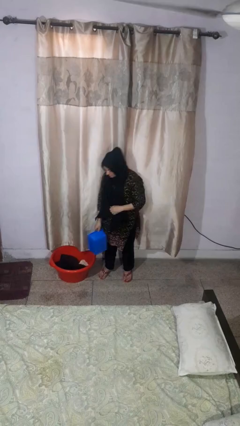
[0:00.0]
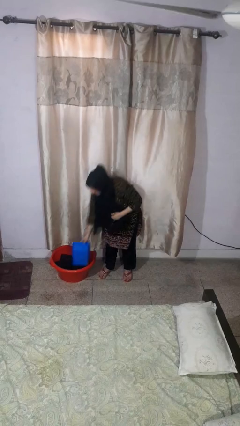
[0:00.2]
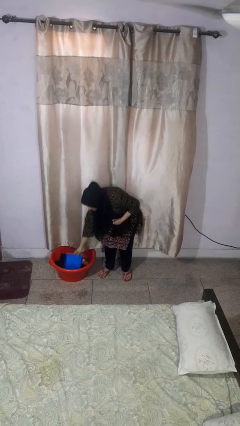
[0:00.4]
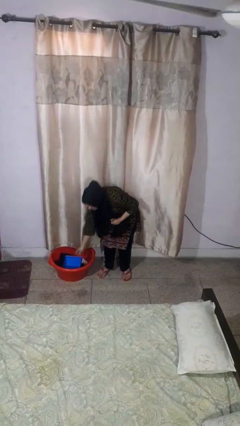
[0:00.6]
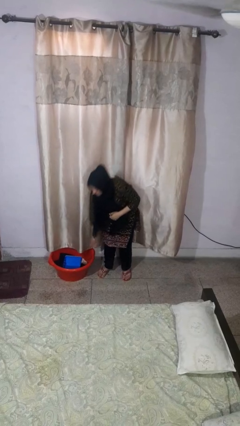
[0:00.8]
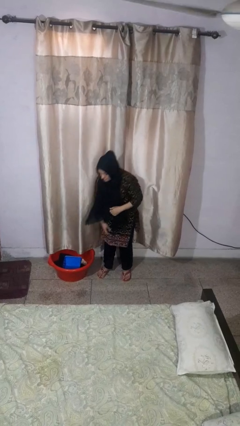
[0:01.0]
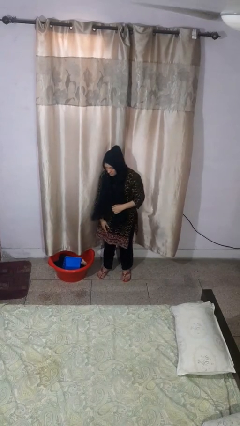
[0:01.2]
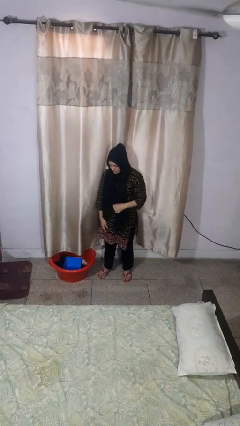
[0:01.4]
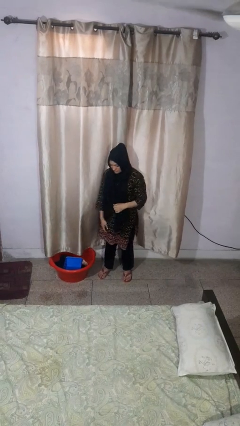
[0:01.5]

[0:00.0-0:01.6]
person puts object into basket

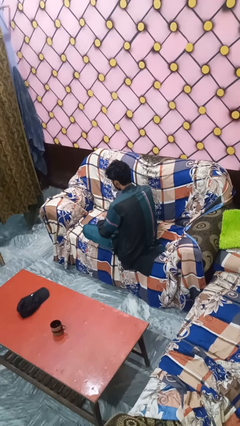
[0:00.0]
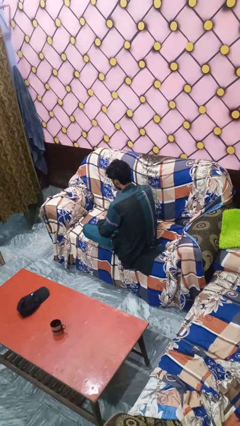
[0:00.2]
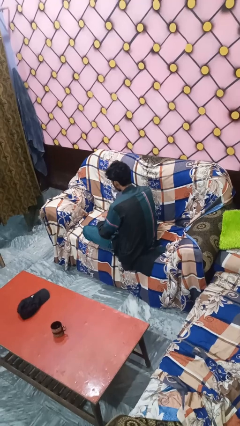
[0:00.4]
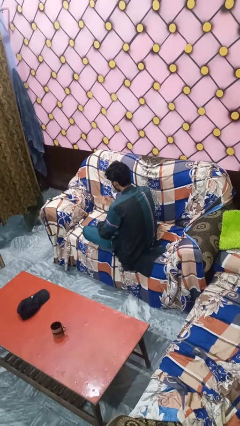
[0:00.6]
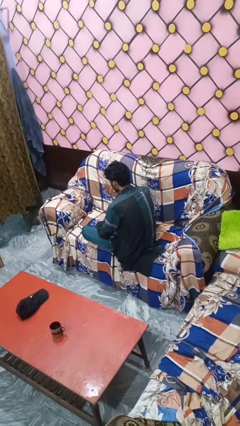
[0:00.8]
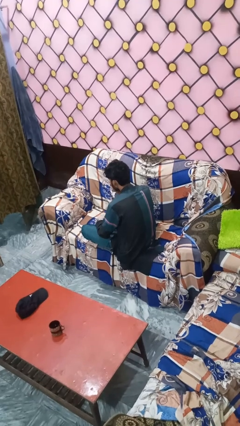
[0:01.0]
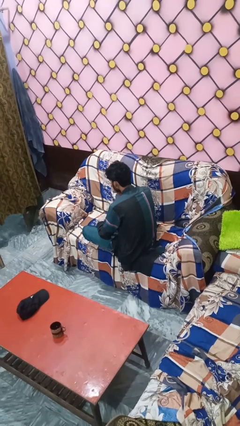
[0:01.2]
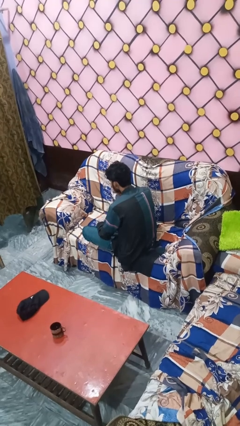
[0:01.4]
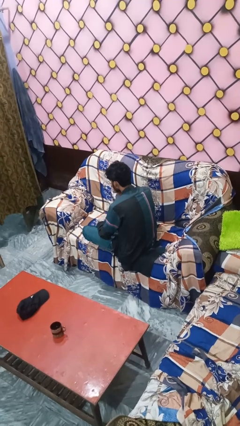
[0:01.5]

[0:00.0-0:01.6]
person gestures blow kiss

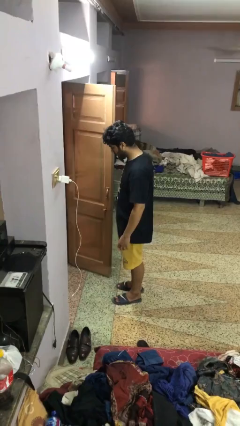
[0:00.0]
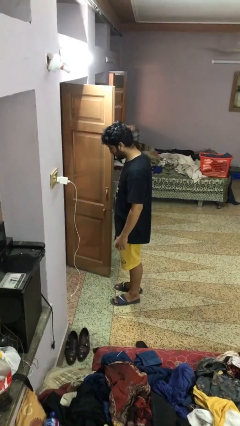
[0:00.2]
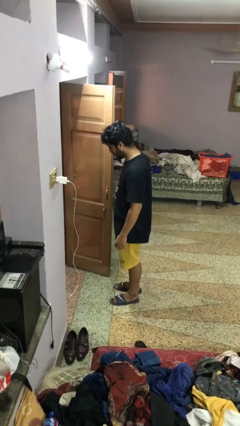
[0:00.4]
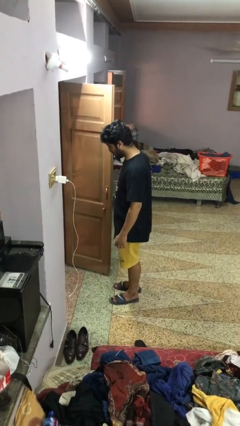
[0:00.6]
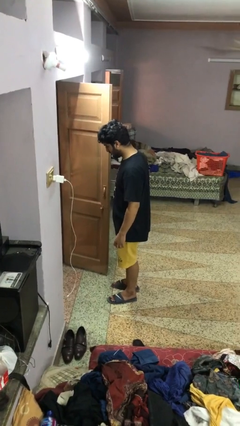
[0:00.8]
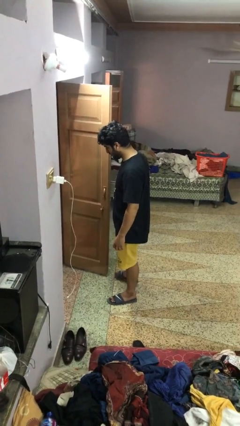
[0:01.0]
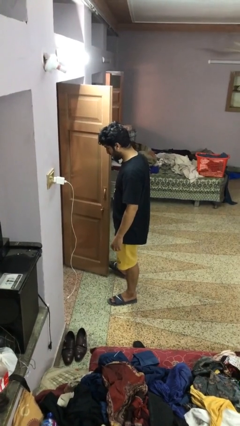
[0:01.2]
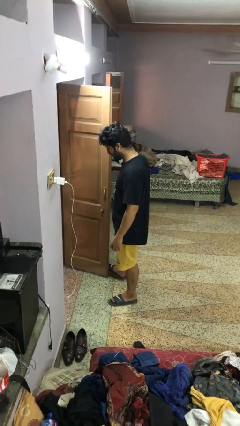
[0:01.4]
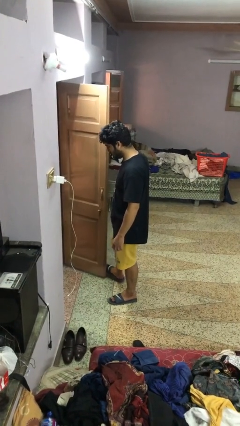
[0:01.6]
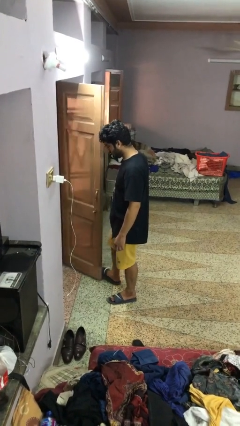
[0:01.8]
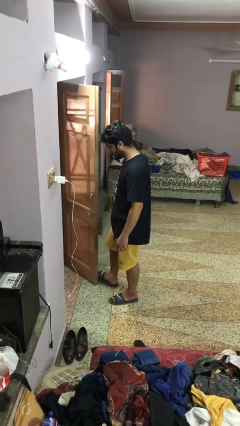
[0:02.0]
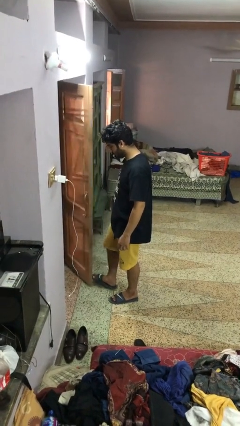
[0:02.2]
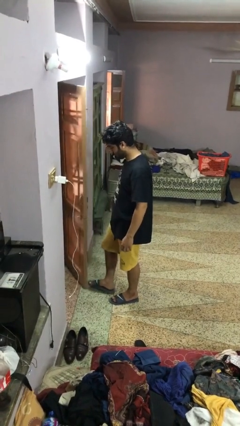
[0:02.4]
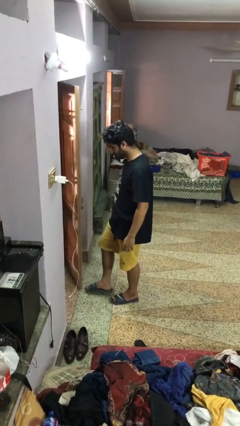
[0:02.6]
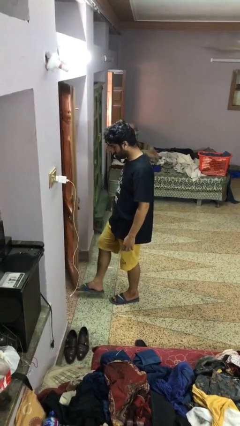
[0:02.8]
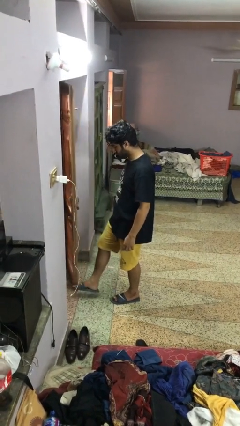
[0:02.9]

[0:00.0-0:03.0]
person closes door with foot

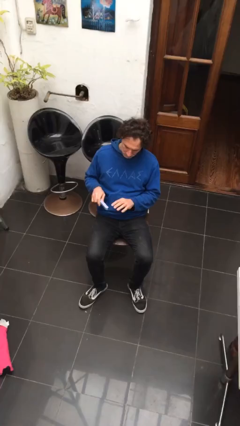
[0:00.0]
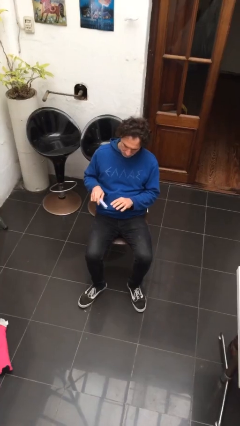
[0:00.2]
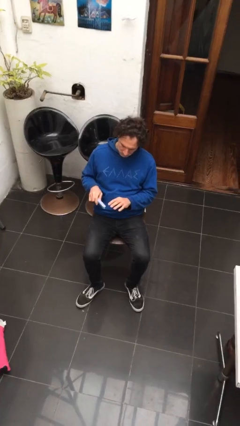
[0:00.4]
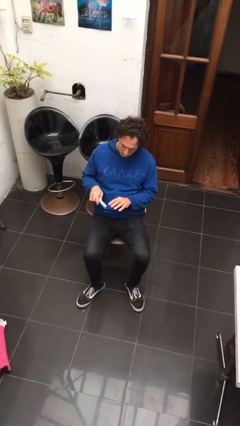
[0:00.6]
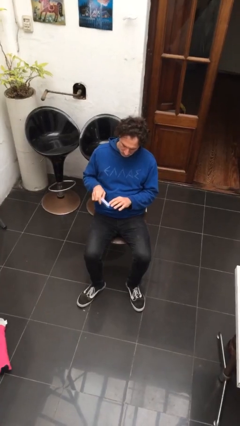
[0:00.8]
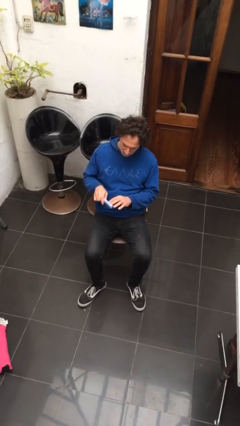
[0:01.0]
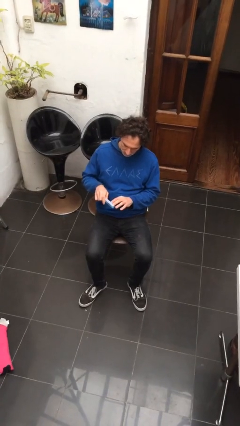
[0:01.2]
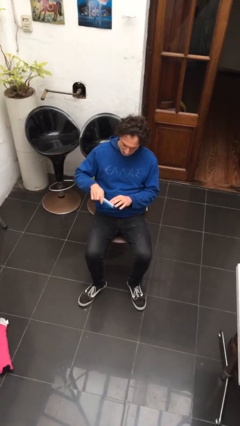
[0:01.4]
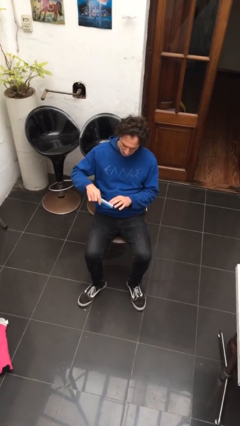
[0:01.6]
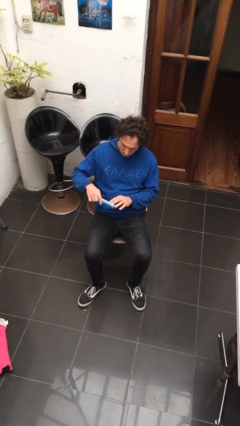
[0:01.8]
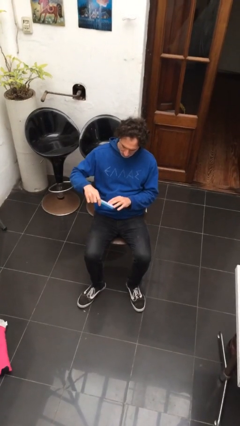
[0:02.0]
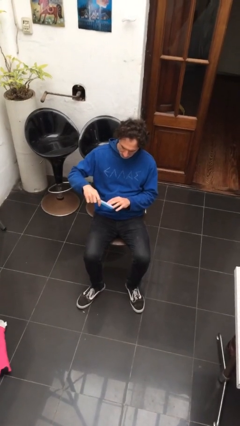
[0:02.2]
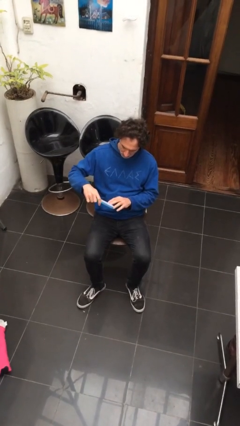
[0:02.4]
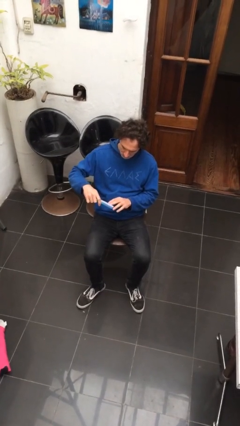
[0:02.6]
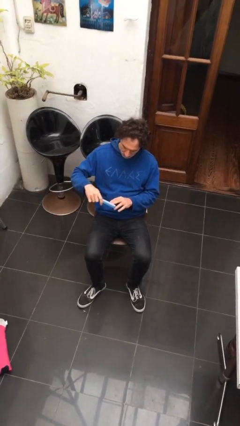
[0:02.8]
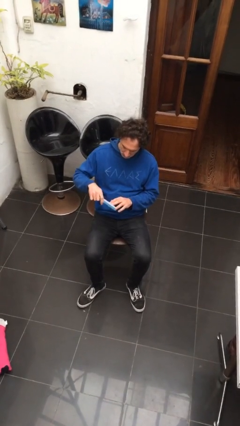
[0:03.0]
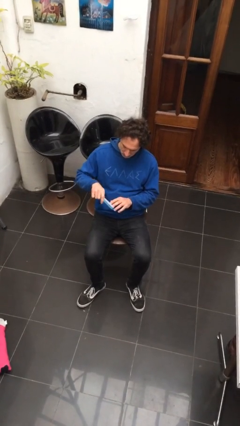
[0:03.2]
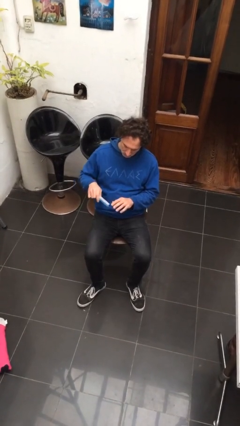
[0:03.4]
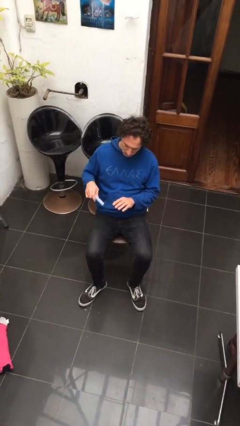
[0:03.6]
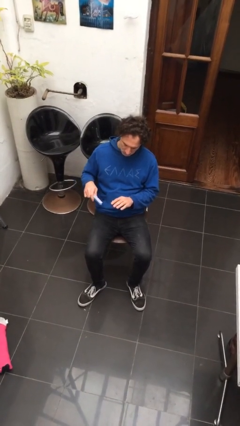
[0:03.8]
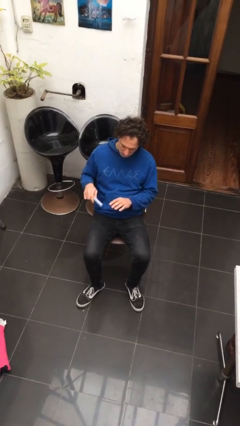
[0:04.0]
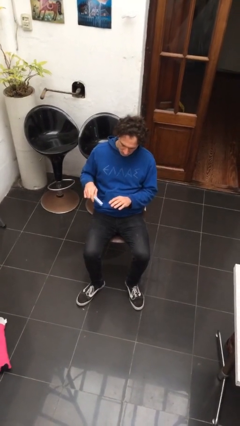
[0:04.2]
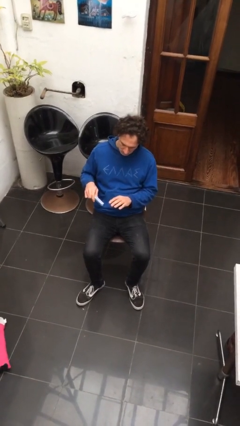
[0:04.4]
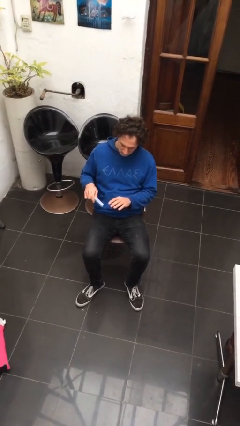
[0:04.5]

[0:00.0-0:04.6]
person files fingernails

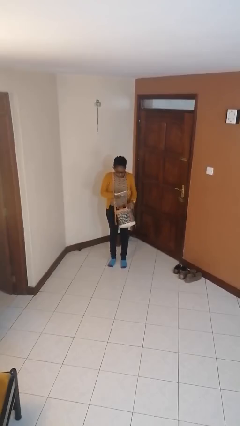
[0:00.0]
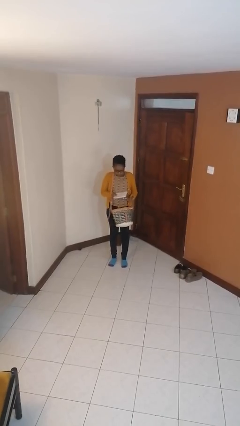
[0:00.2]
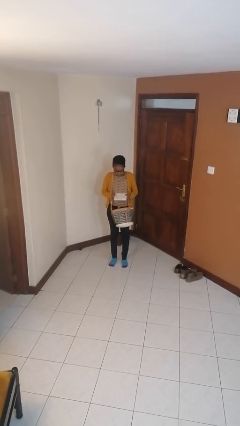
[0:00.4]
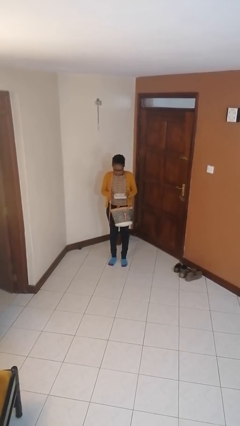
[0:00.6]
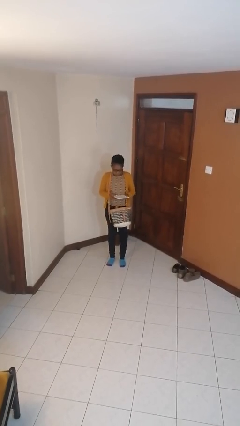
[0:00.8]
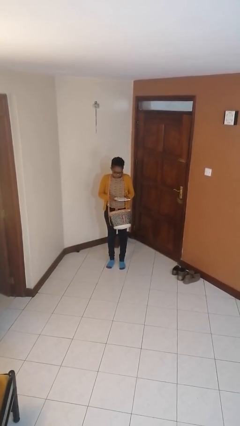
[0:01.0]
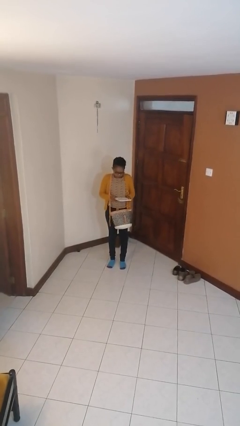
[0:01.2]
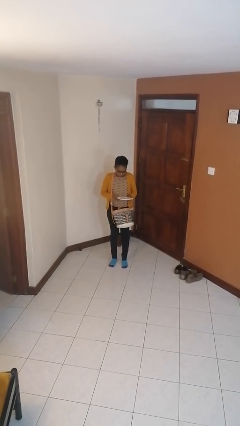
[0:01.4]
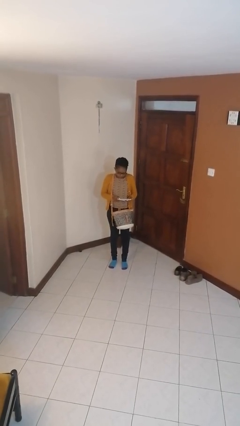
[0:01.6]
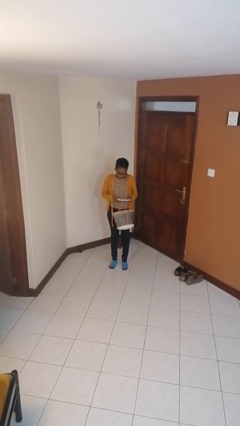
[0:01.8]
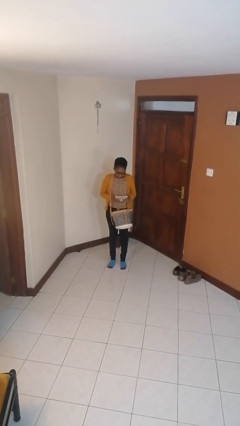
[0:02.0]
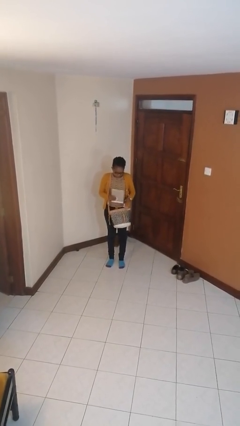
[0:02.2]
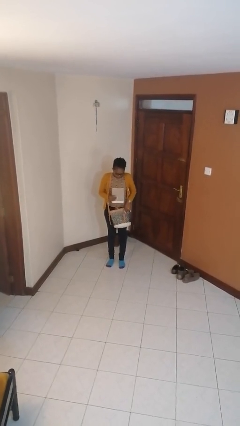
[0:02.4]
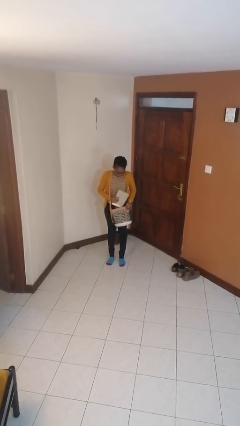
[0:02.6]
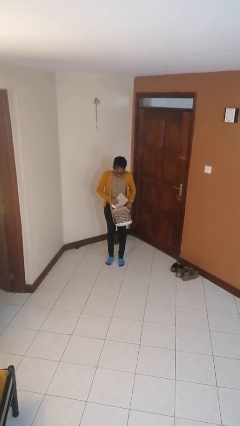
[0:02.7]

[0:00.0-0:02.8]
person takes object from purse

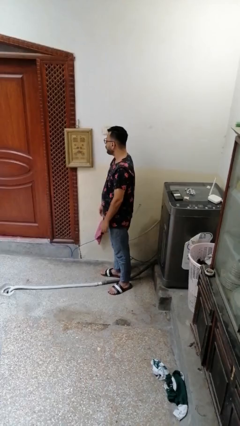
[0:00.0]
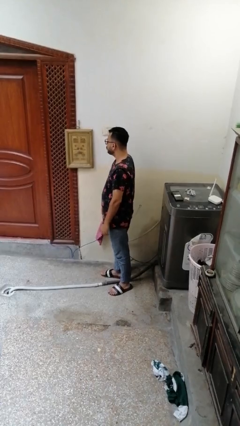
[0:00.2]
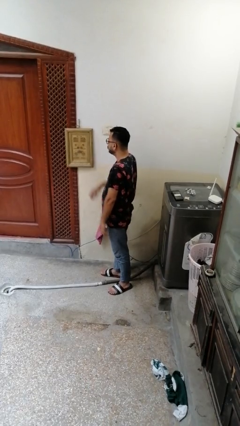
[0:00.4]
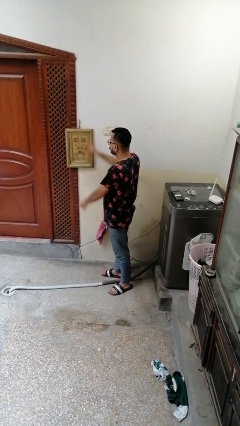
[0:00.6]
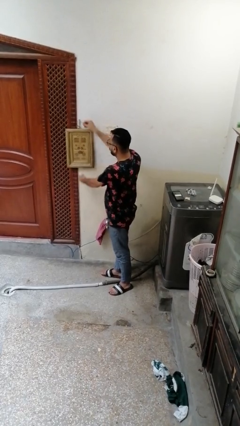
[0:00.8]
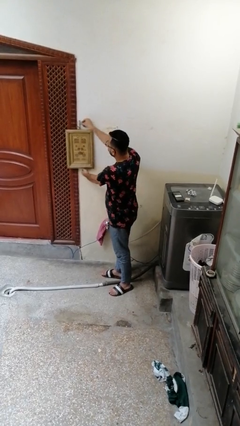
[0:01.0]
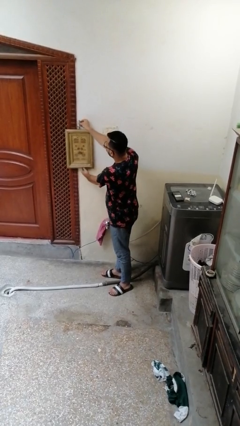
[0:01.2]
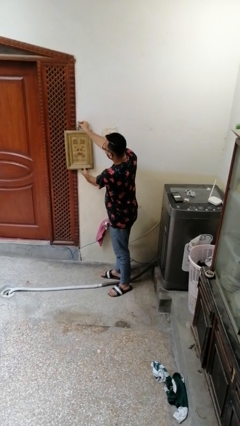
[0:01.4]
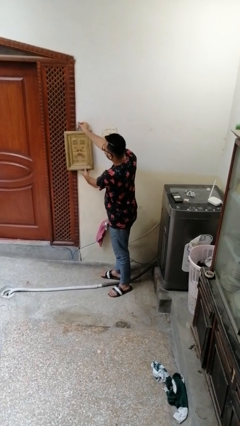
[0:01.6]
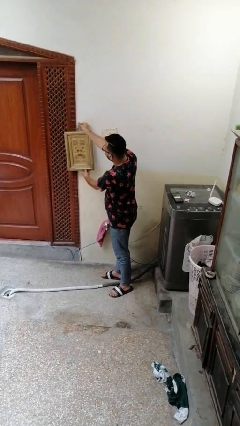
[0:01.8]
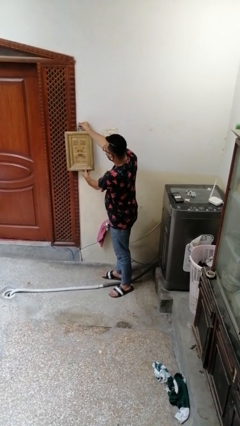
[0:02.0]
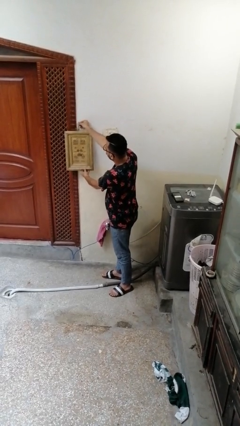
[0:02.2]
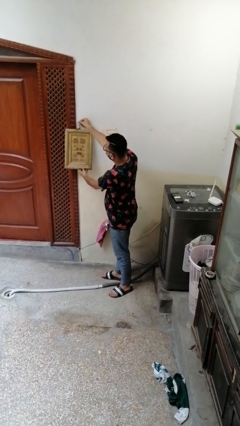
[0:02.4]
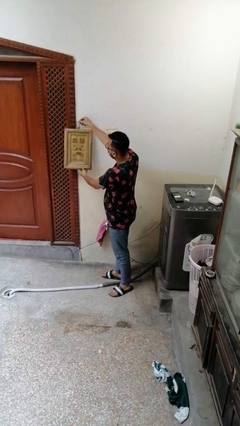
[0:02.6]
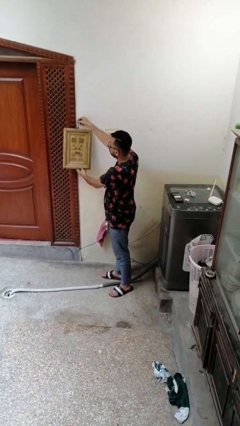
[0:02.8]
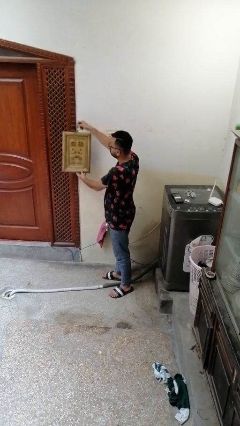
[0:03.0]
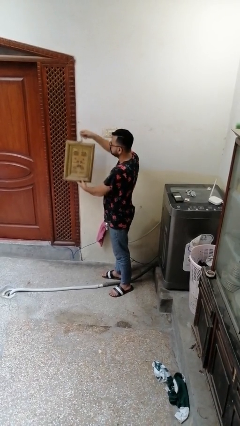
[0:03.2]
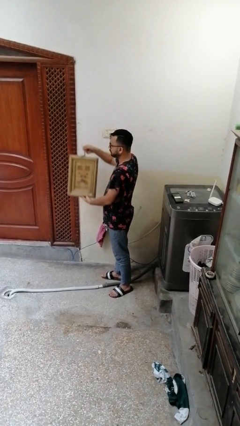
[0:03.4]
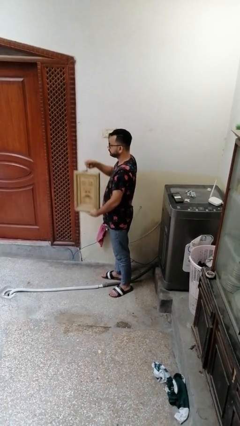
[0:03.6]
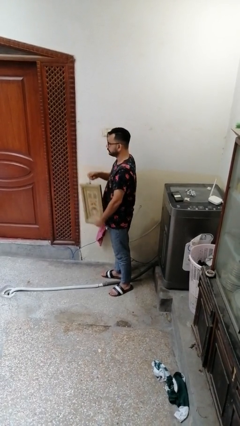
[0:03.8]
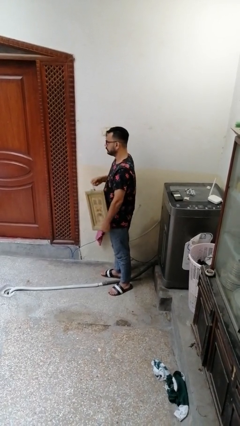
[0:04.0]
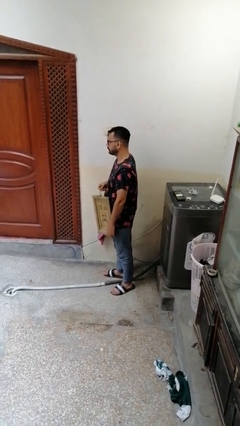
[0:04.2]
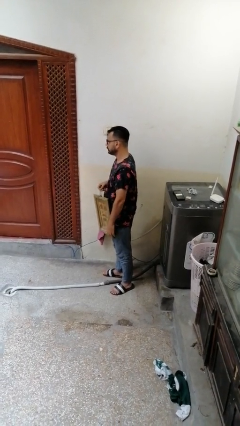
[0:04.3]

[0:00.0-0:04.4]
person takes down picture frame
